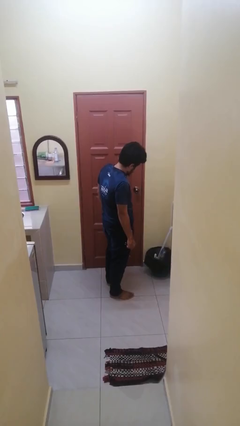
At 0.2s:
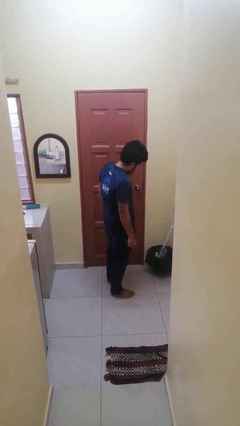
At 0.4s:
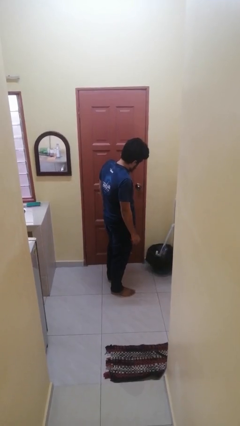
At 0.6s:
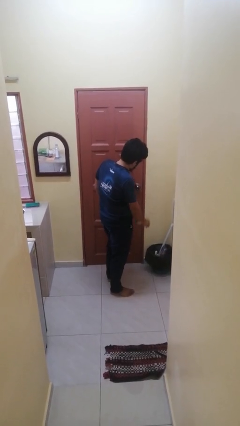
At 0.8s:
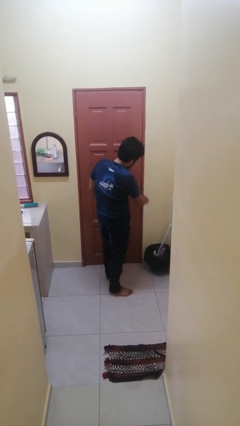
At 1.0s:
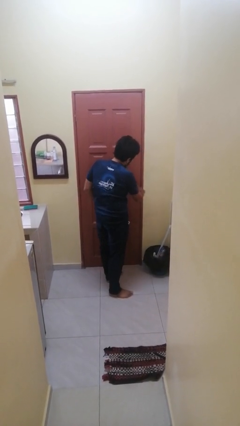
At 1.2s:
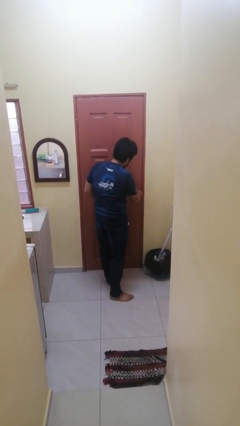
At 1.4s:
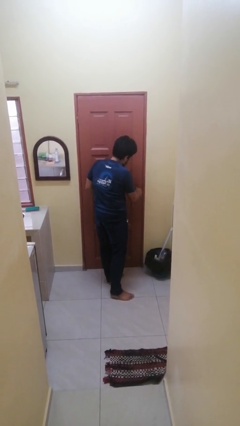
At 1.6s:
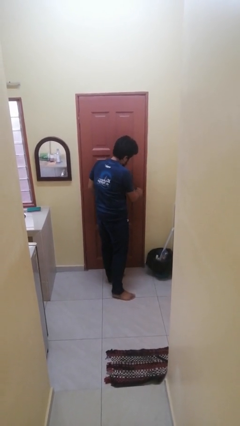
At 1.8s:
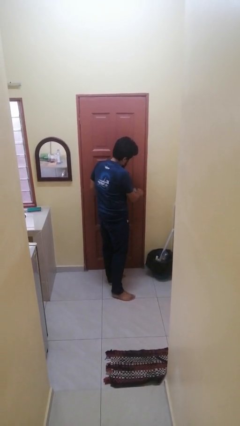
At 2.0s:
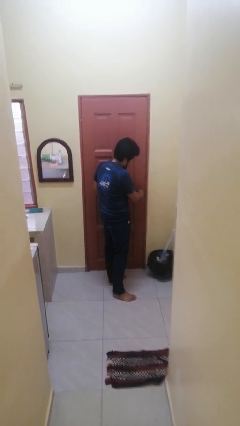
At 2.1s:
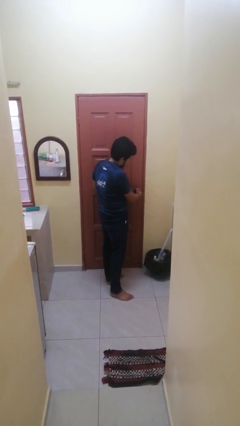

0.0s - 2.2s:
person unlocks door with keys

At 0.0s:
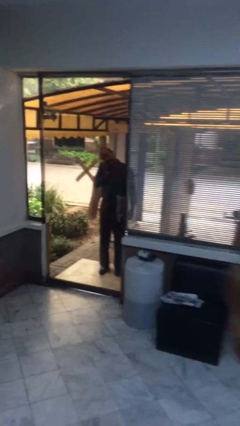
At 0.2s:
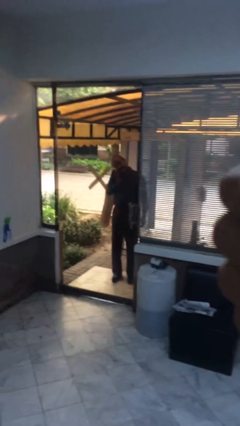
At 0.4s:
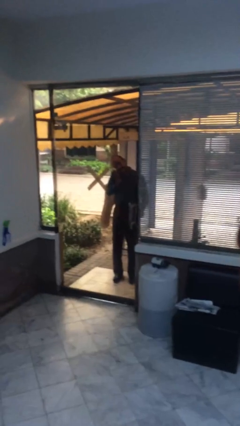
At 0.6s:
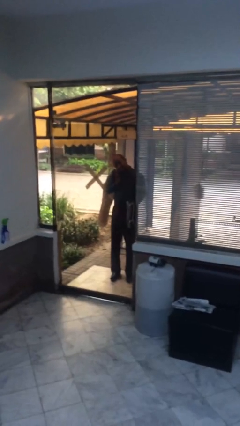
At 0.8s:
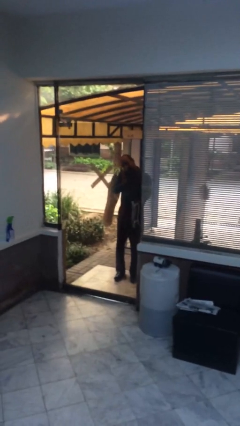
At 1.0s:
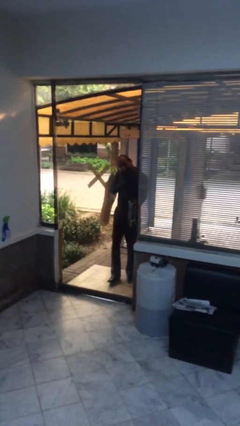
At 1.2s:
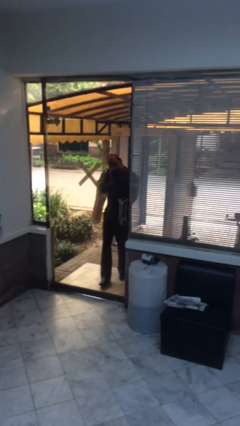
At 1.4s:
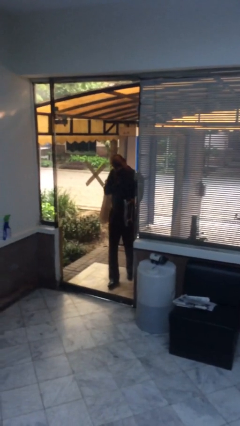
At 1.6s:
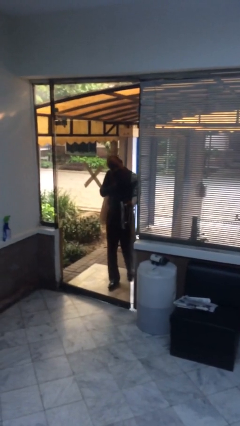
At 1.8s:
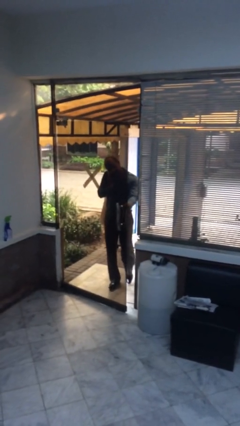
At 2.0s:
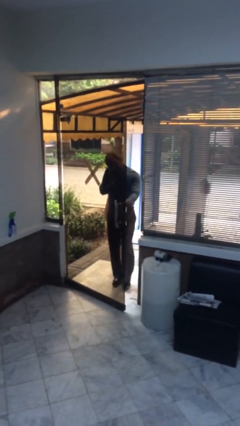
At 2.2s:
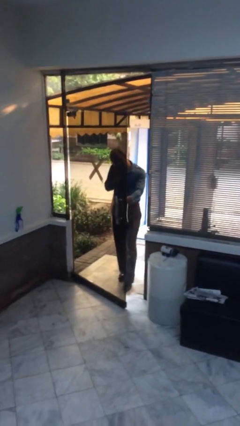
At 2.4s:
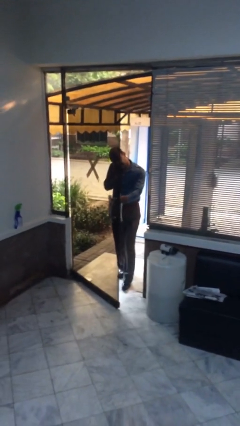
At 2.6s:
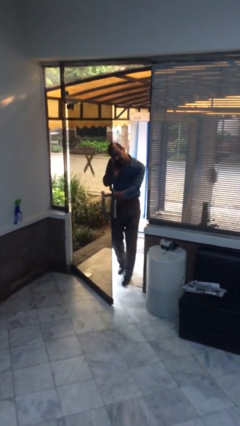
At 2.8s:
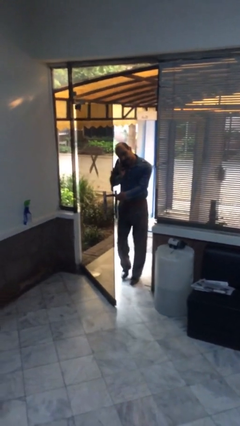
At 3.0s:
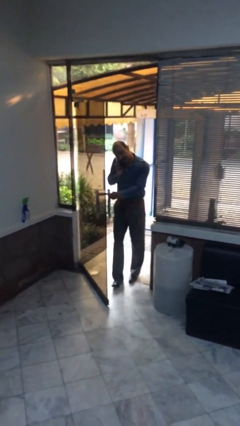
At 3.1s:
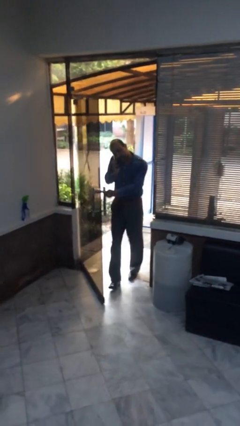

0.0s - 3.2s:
person opens facility door

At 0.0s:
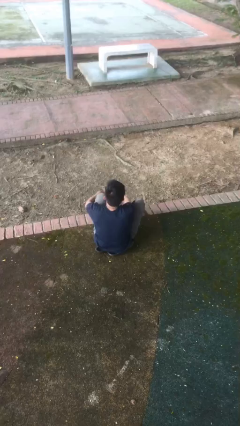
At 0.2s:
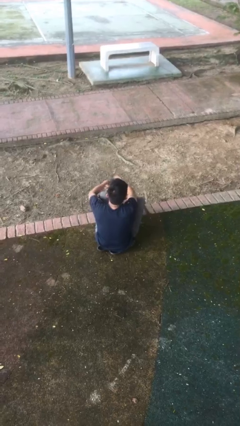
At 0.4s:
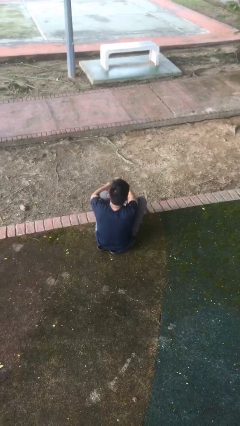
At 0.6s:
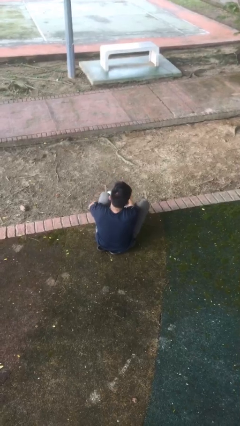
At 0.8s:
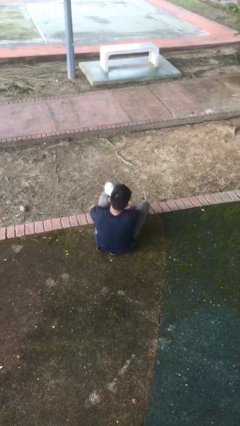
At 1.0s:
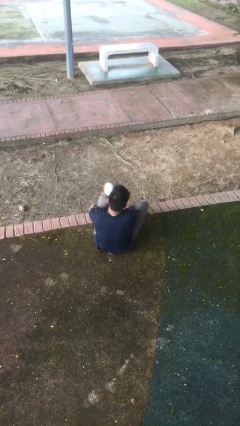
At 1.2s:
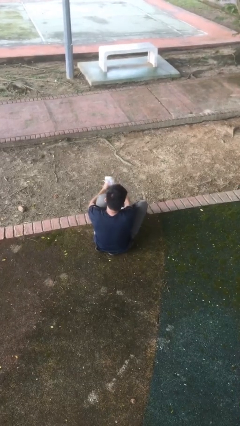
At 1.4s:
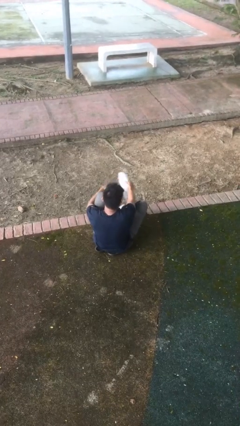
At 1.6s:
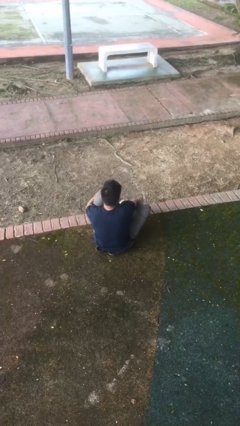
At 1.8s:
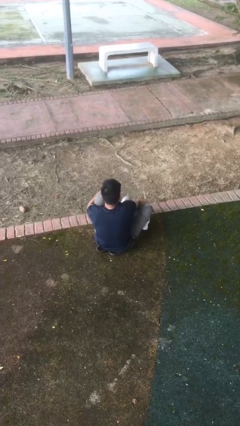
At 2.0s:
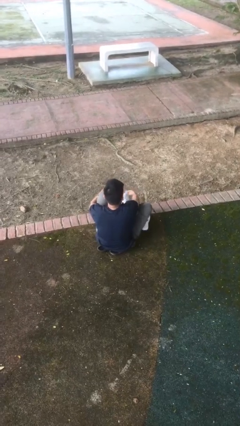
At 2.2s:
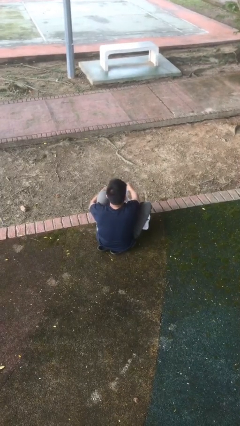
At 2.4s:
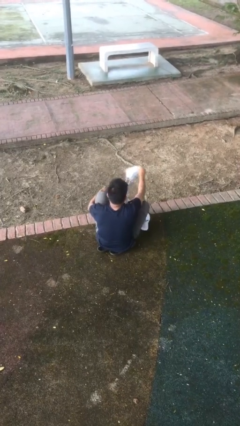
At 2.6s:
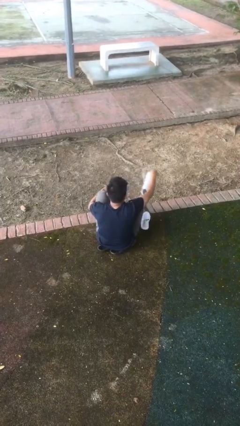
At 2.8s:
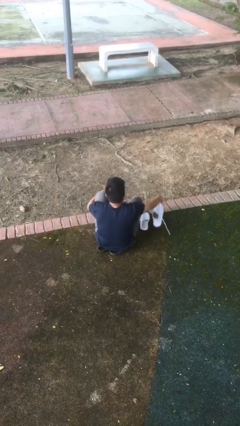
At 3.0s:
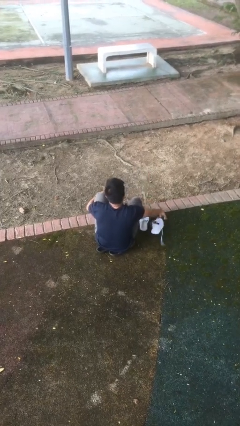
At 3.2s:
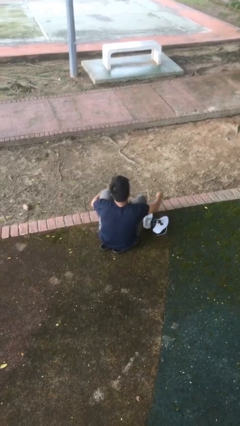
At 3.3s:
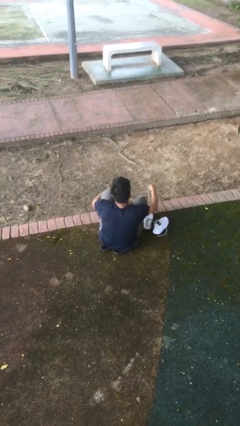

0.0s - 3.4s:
person takes off shoes

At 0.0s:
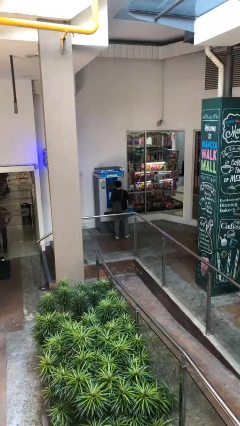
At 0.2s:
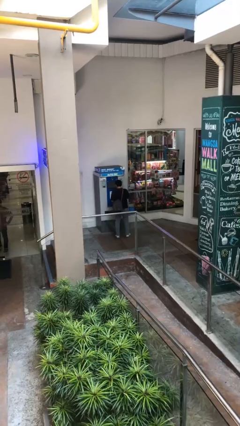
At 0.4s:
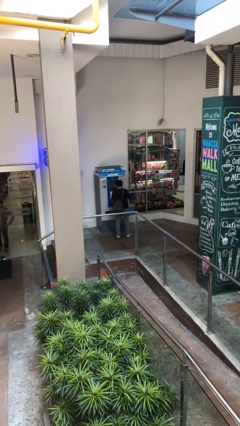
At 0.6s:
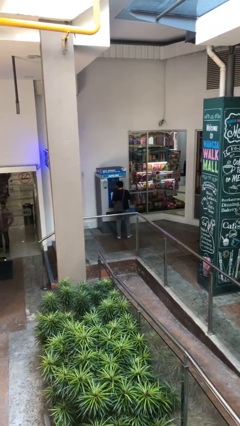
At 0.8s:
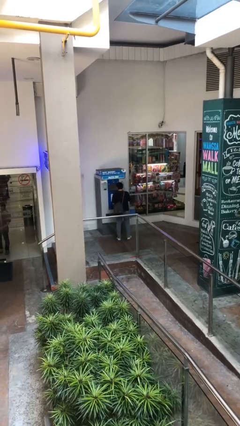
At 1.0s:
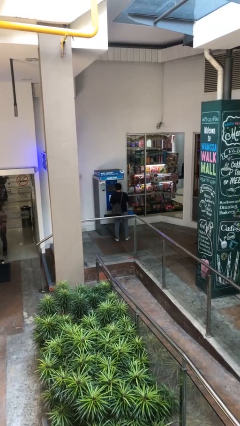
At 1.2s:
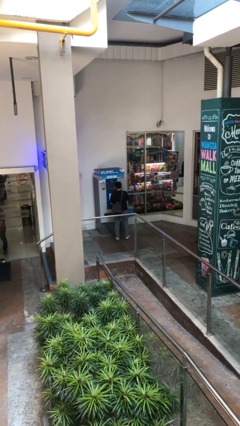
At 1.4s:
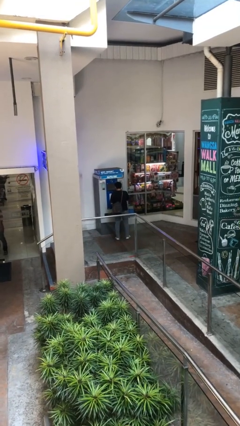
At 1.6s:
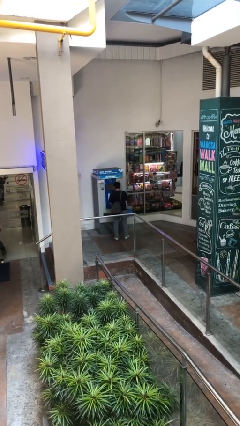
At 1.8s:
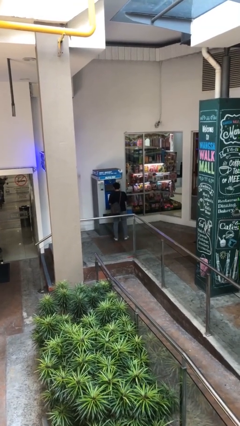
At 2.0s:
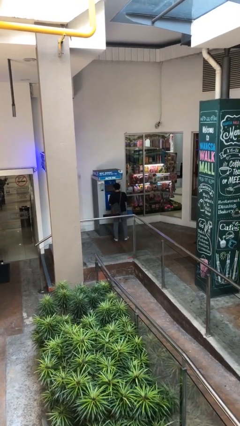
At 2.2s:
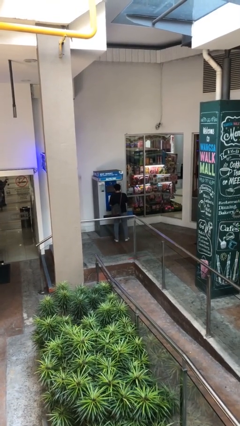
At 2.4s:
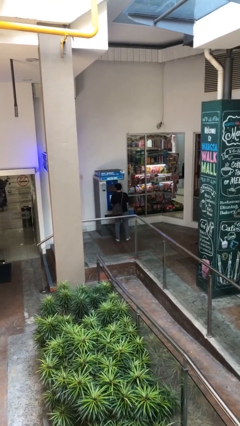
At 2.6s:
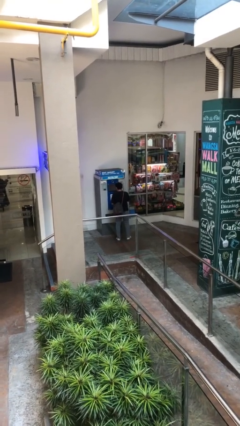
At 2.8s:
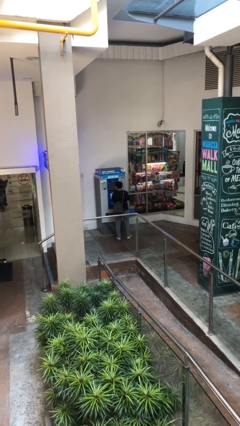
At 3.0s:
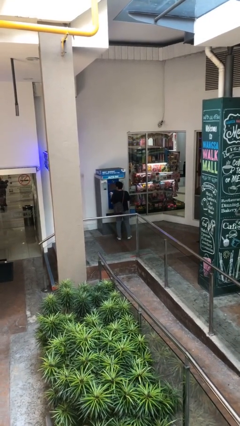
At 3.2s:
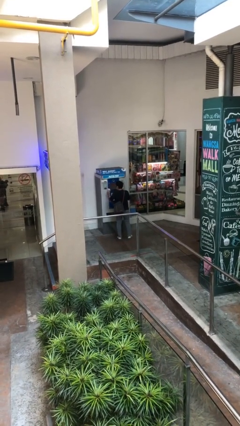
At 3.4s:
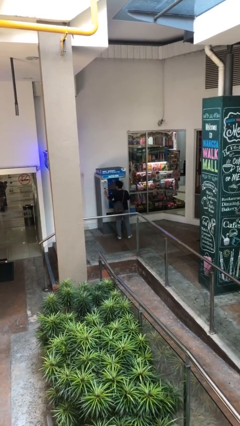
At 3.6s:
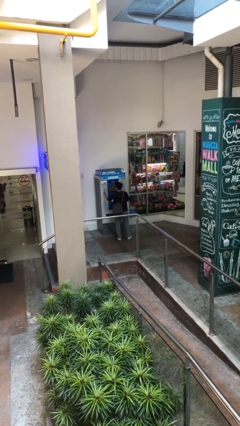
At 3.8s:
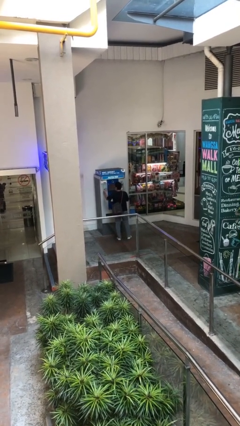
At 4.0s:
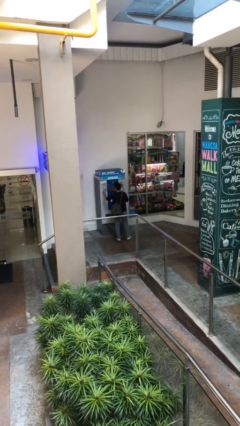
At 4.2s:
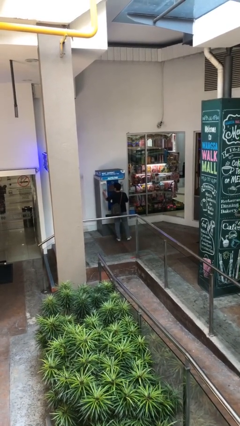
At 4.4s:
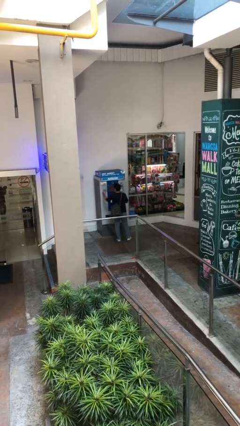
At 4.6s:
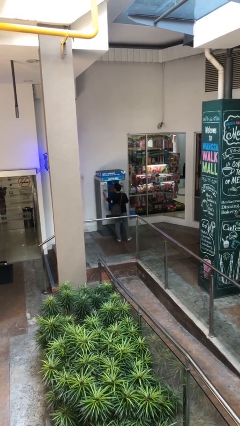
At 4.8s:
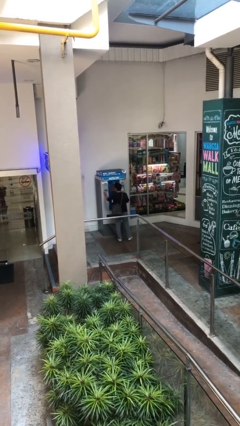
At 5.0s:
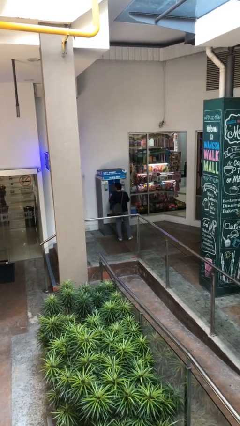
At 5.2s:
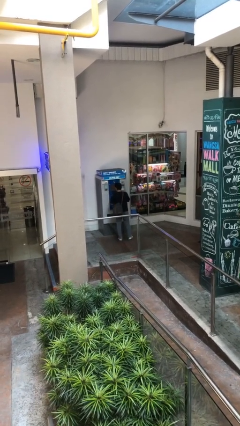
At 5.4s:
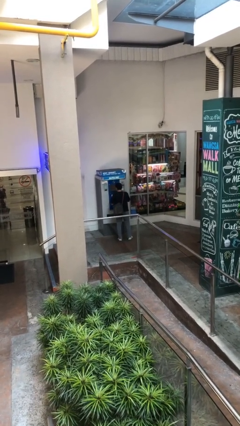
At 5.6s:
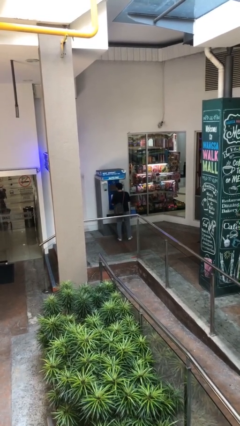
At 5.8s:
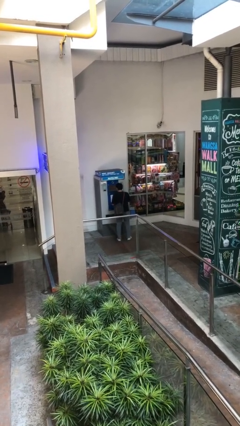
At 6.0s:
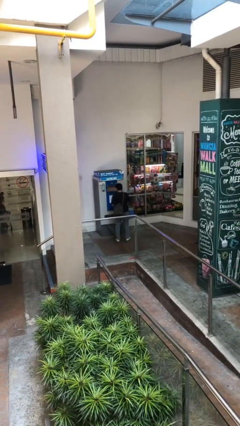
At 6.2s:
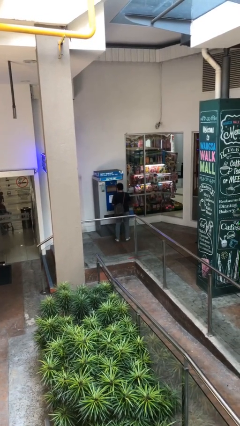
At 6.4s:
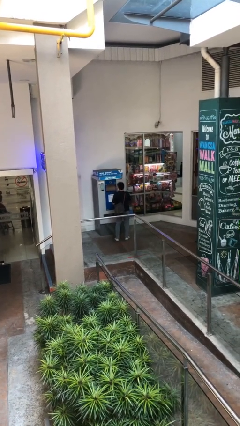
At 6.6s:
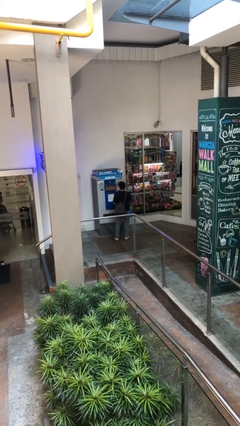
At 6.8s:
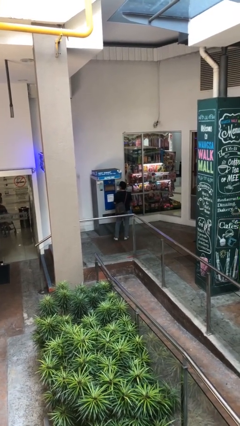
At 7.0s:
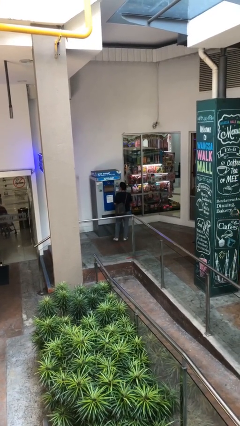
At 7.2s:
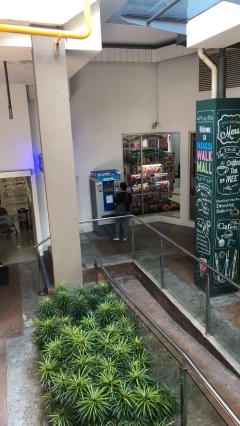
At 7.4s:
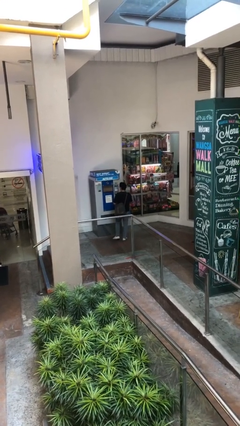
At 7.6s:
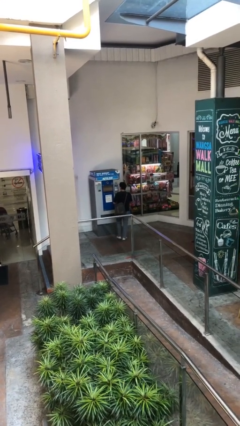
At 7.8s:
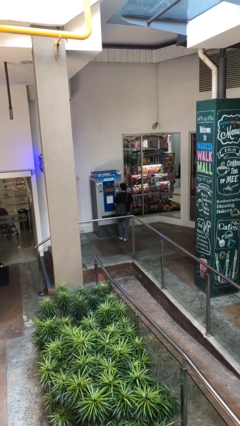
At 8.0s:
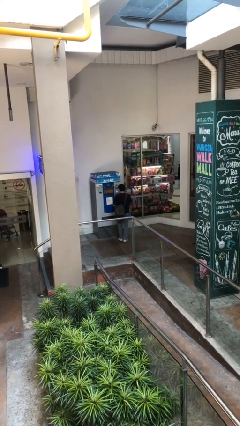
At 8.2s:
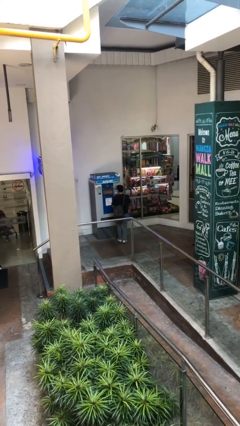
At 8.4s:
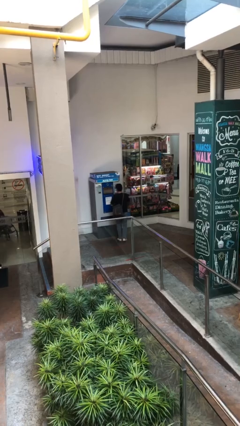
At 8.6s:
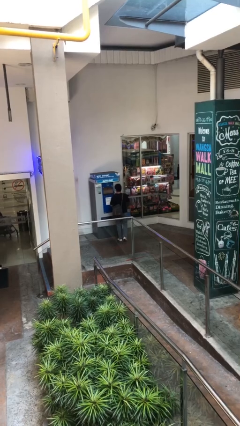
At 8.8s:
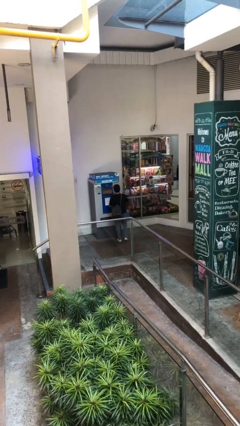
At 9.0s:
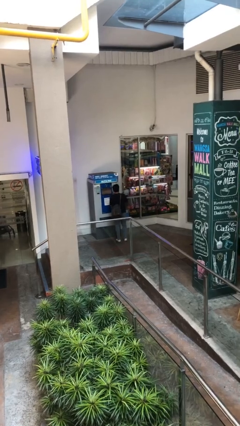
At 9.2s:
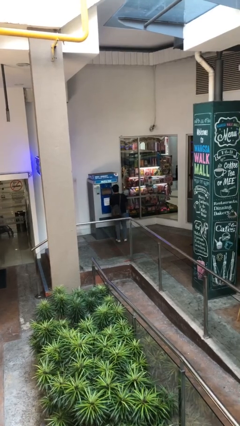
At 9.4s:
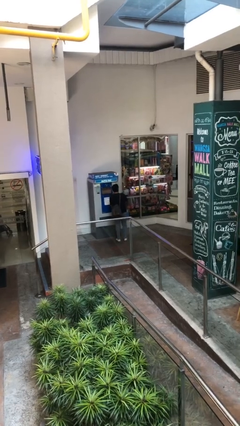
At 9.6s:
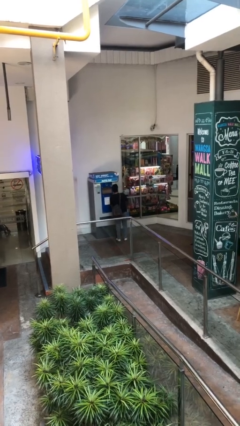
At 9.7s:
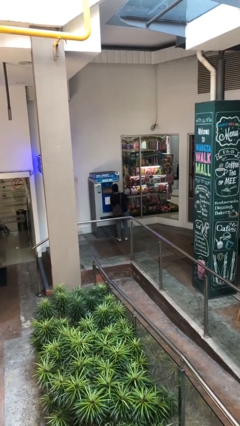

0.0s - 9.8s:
person purchases from machine
